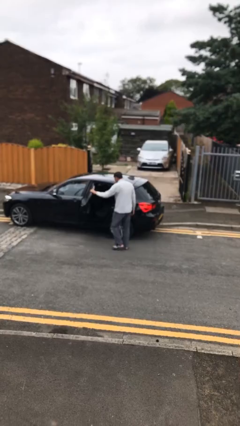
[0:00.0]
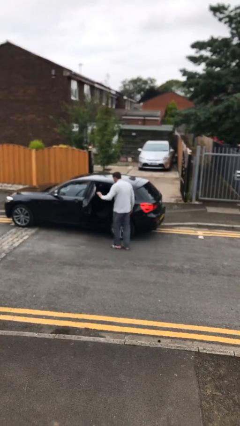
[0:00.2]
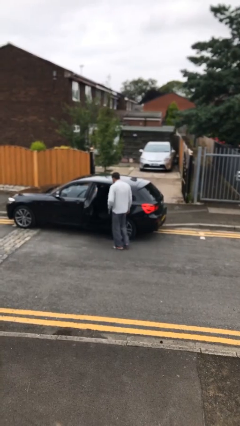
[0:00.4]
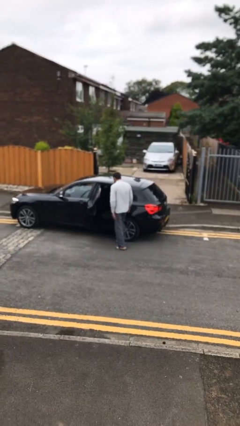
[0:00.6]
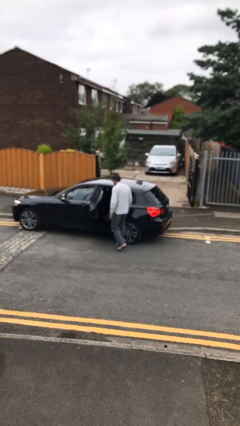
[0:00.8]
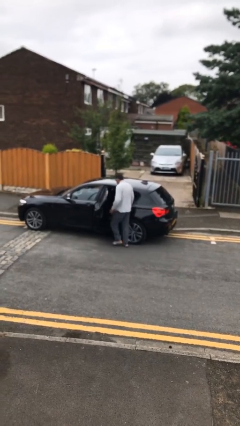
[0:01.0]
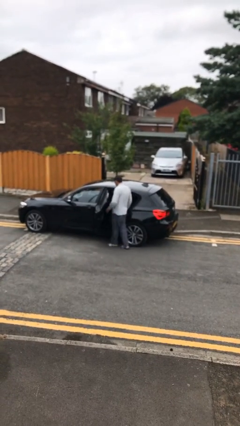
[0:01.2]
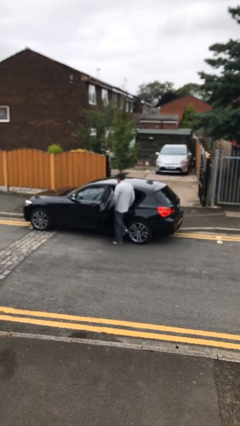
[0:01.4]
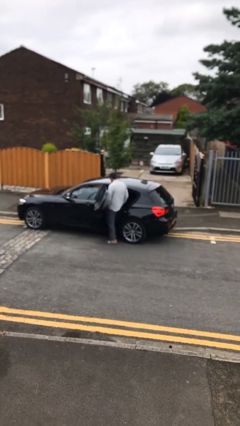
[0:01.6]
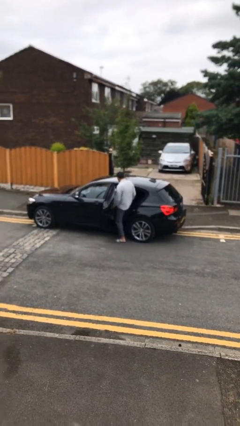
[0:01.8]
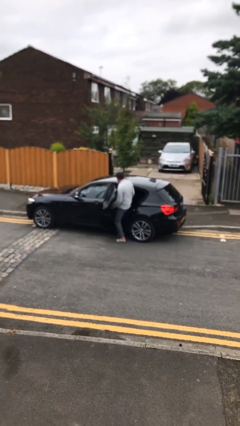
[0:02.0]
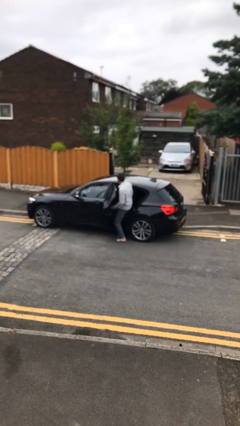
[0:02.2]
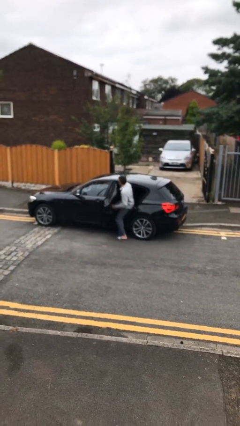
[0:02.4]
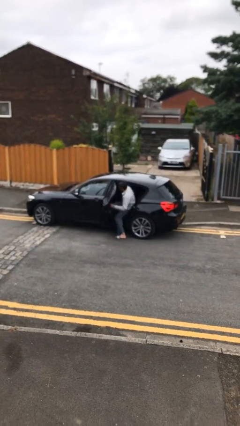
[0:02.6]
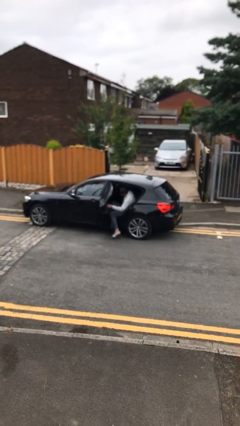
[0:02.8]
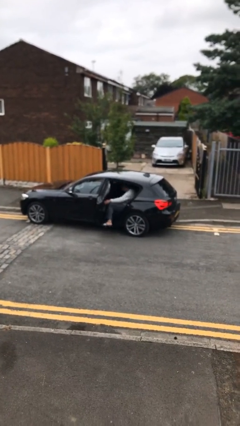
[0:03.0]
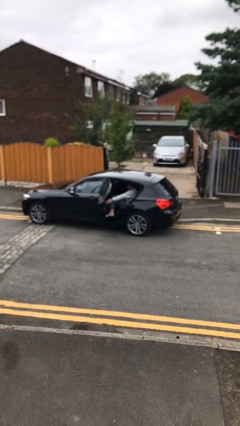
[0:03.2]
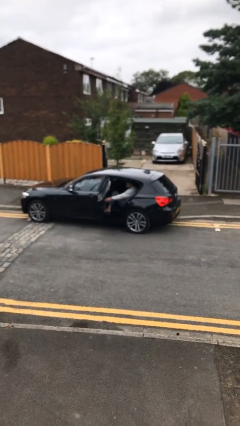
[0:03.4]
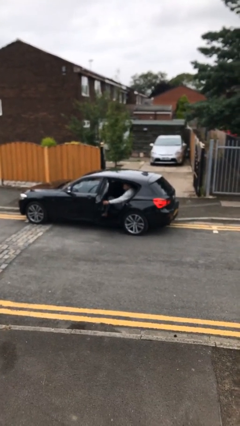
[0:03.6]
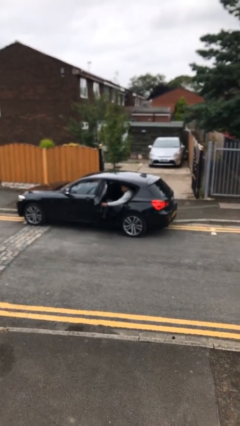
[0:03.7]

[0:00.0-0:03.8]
person enters car

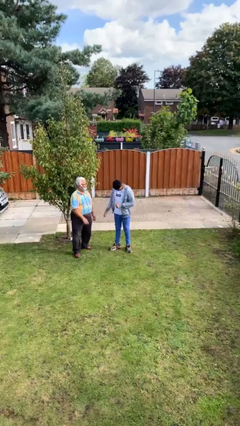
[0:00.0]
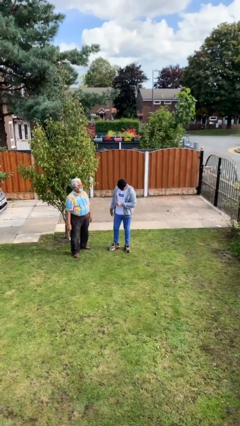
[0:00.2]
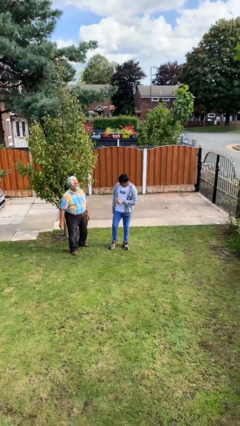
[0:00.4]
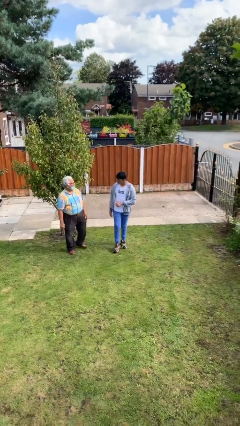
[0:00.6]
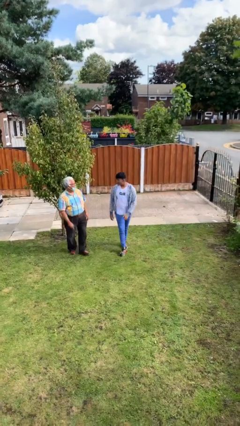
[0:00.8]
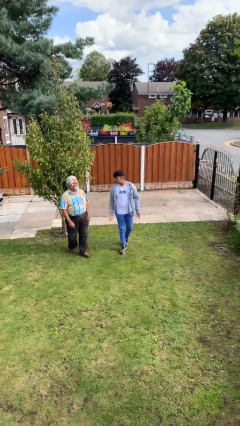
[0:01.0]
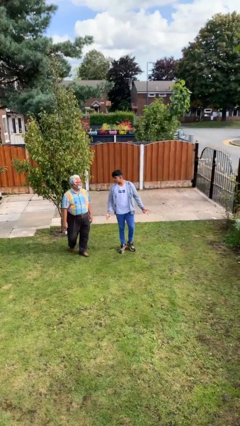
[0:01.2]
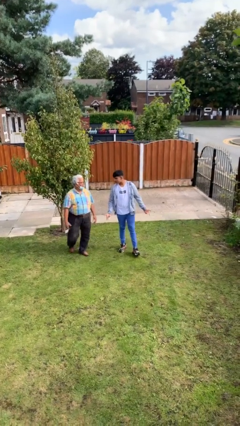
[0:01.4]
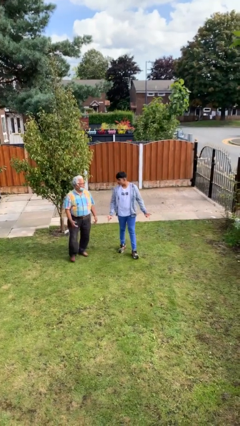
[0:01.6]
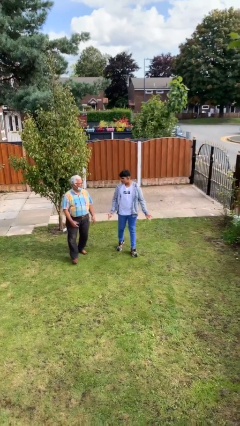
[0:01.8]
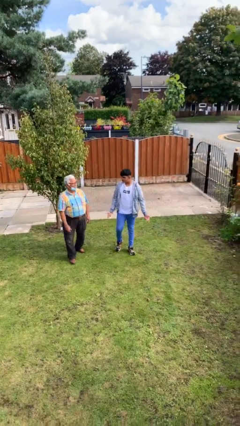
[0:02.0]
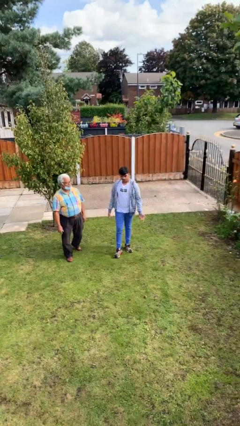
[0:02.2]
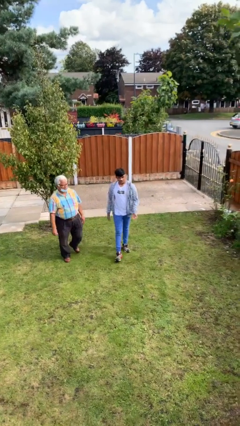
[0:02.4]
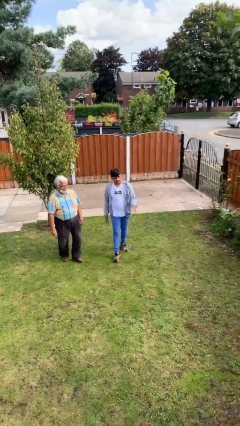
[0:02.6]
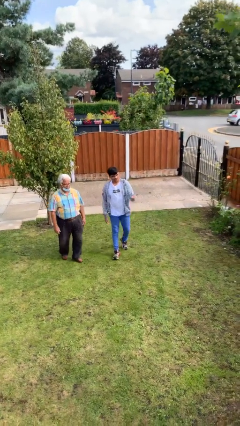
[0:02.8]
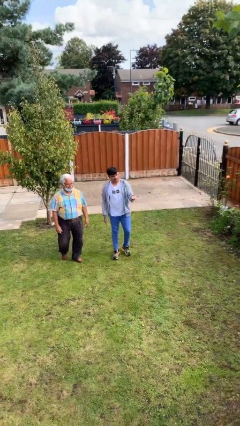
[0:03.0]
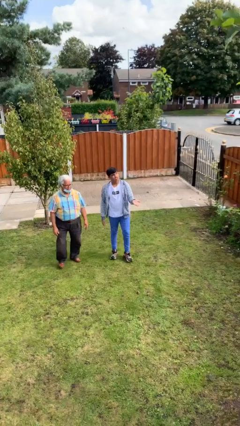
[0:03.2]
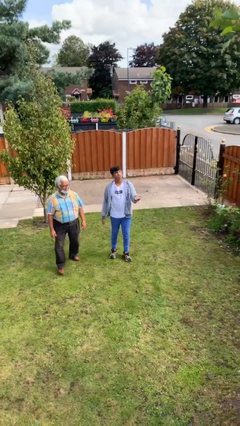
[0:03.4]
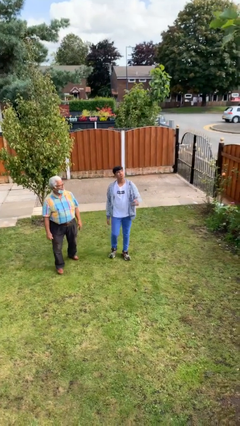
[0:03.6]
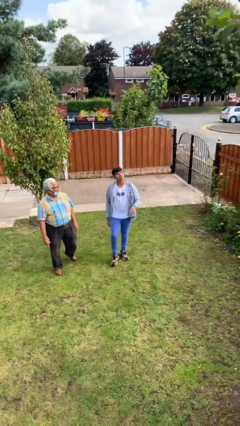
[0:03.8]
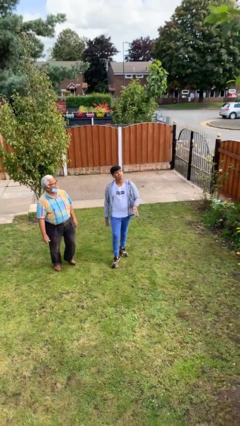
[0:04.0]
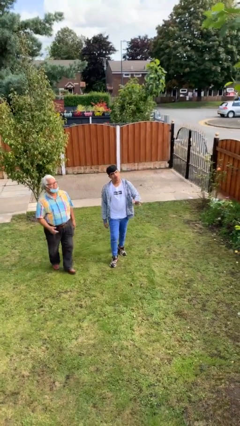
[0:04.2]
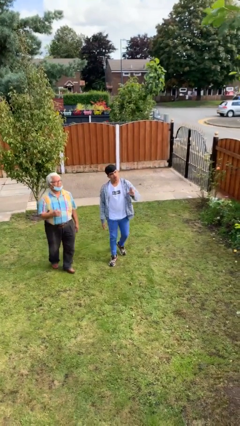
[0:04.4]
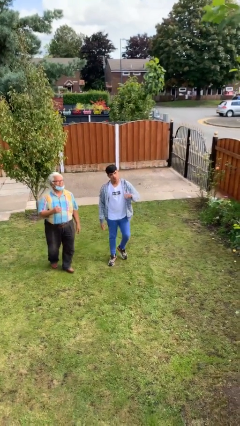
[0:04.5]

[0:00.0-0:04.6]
person talks to person

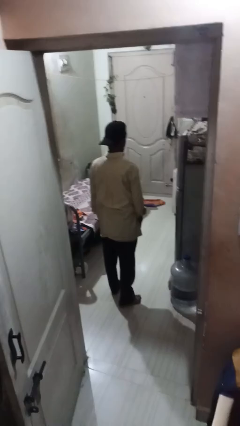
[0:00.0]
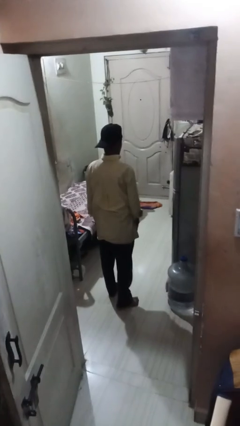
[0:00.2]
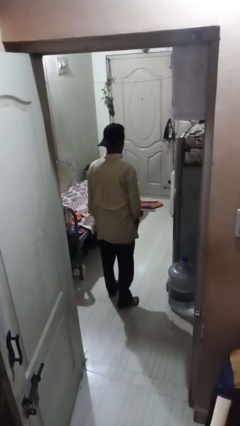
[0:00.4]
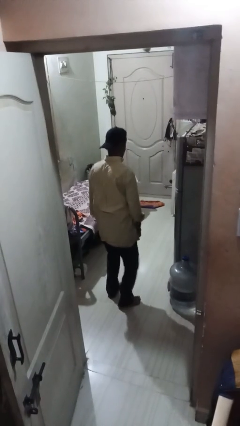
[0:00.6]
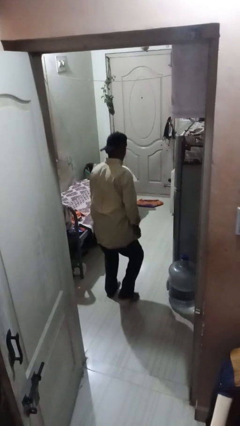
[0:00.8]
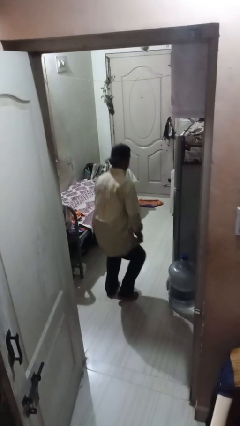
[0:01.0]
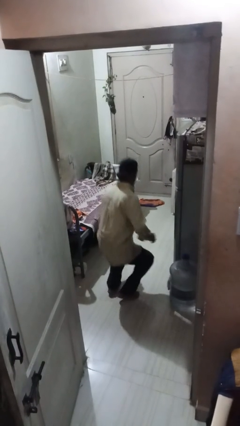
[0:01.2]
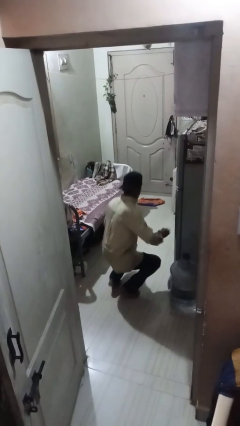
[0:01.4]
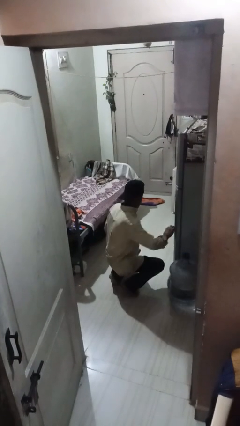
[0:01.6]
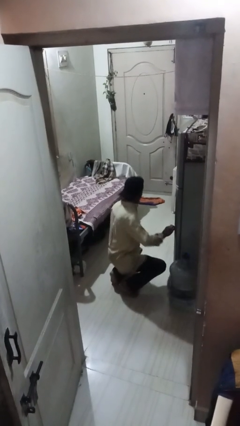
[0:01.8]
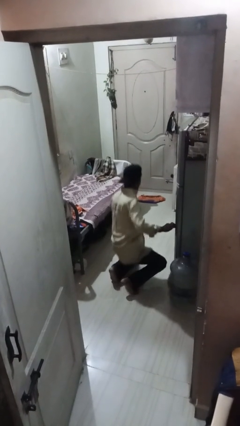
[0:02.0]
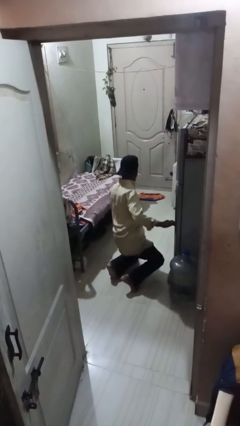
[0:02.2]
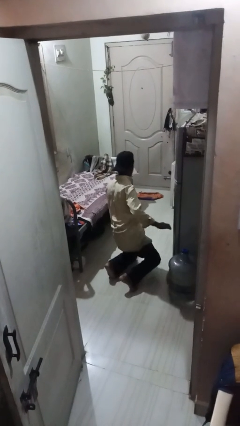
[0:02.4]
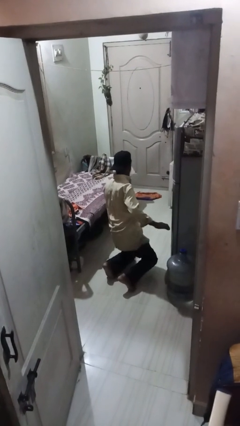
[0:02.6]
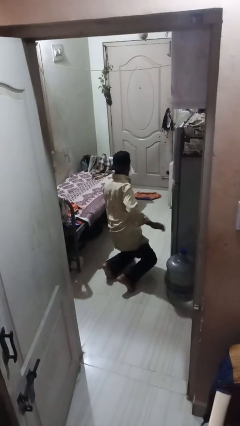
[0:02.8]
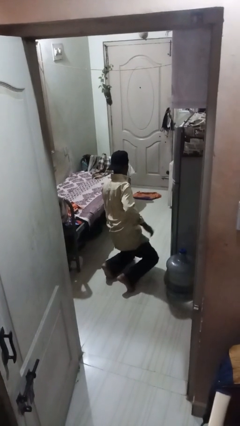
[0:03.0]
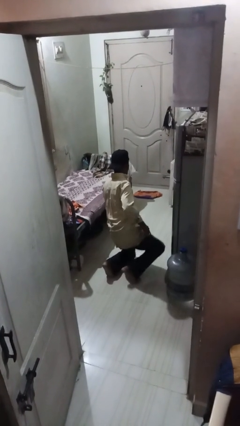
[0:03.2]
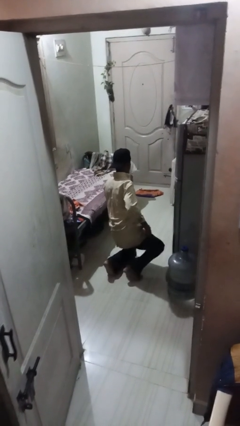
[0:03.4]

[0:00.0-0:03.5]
person kneels

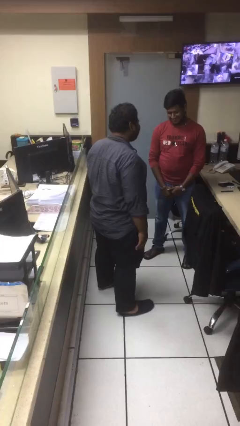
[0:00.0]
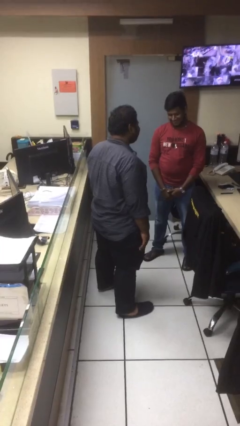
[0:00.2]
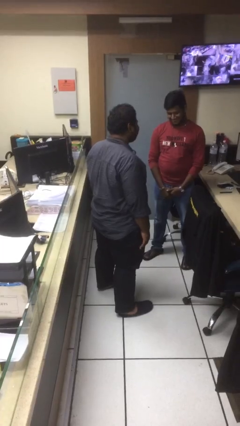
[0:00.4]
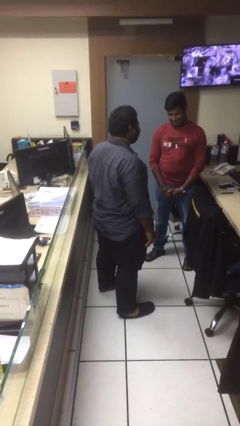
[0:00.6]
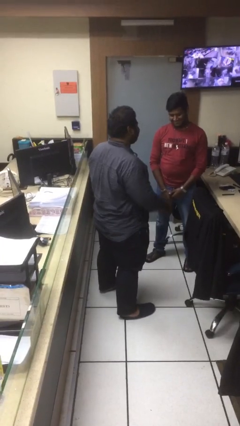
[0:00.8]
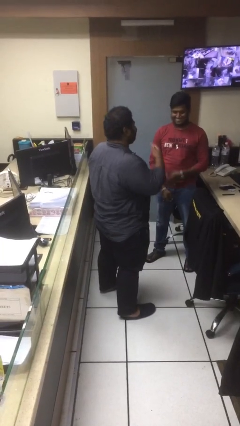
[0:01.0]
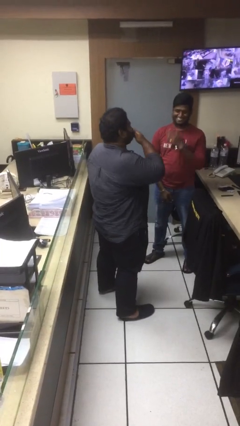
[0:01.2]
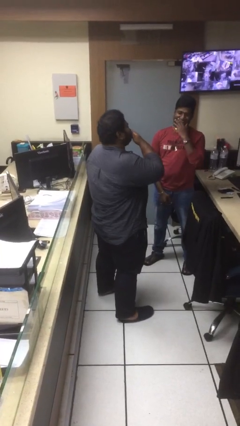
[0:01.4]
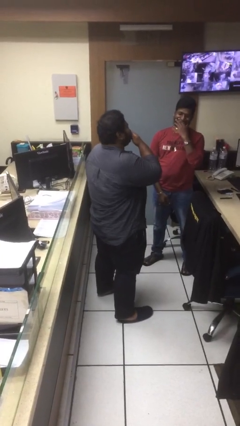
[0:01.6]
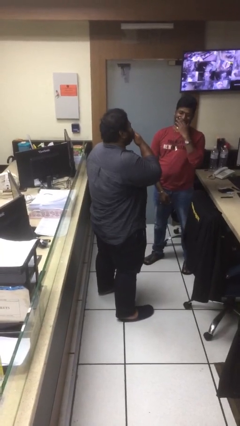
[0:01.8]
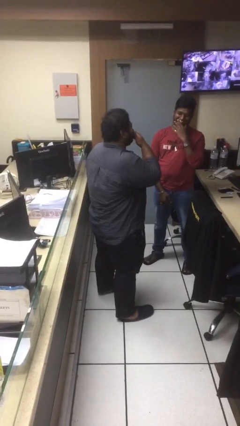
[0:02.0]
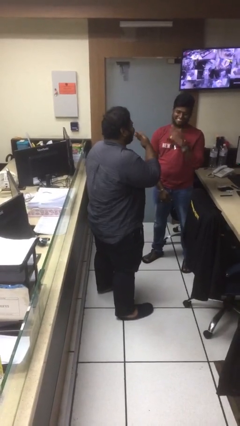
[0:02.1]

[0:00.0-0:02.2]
person laughs with person

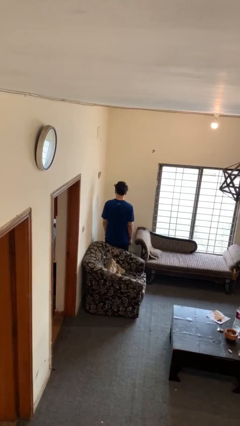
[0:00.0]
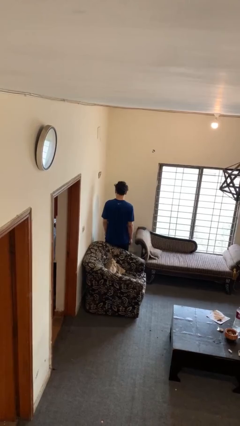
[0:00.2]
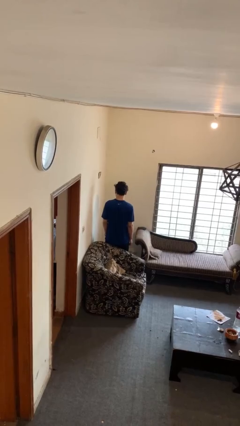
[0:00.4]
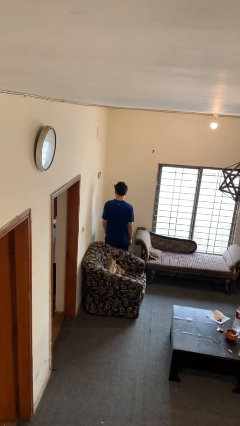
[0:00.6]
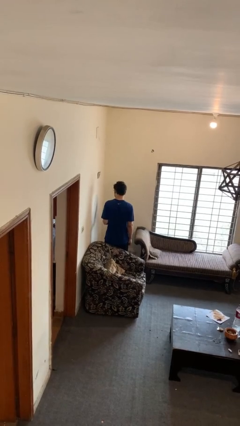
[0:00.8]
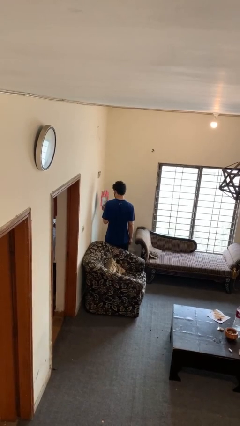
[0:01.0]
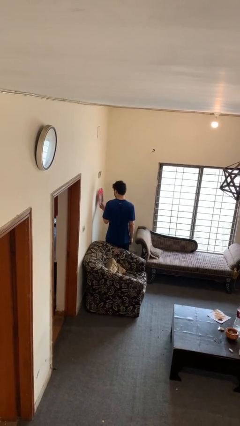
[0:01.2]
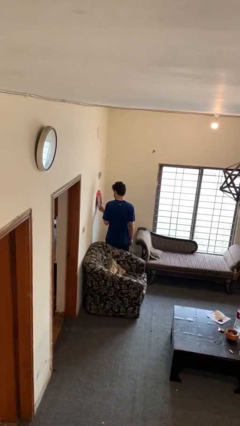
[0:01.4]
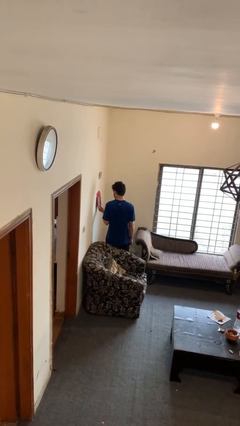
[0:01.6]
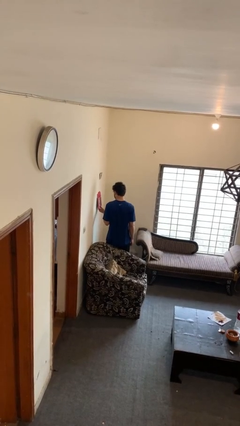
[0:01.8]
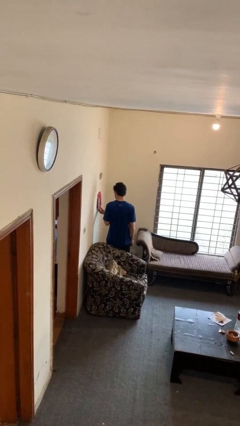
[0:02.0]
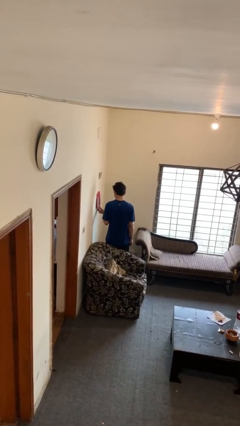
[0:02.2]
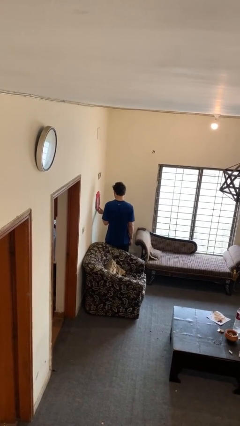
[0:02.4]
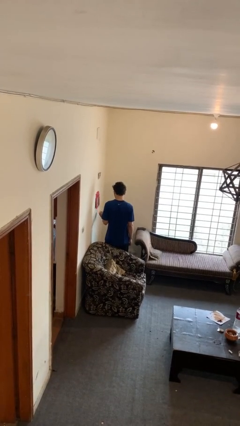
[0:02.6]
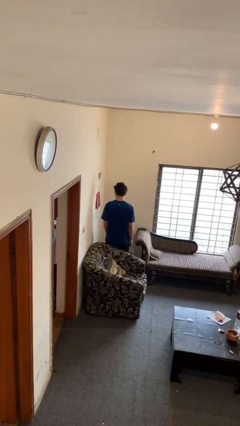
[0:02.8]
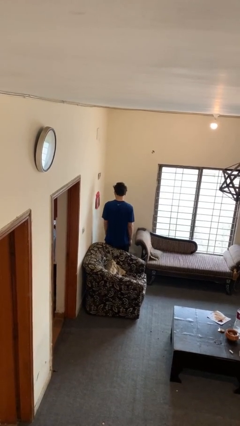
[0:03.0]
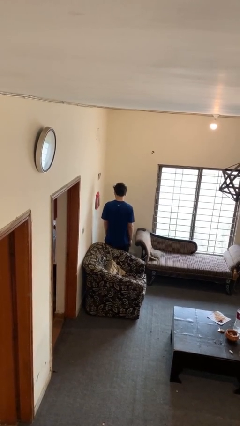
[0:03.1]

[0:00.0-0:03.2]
person puts up picture frame

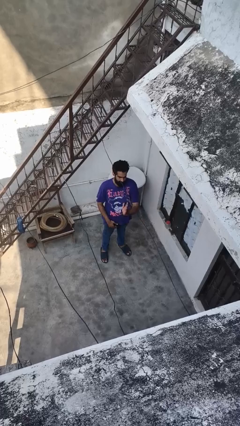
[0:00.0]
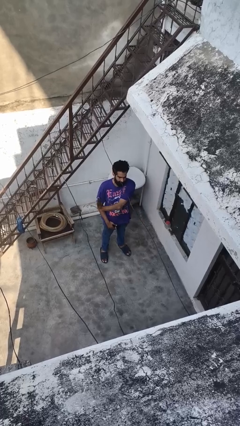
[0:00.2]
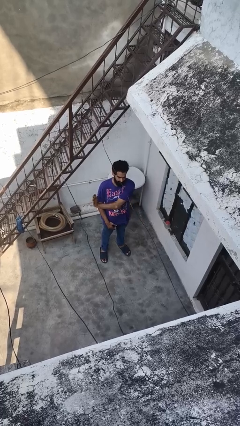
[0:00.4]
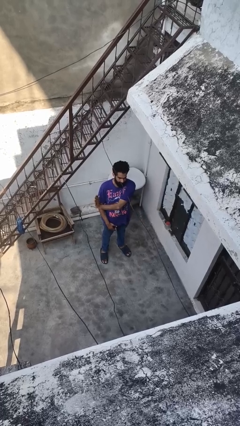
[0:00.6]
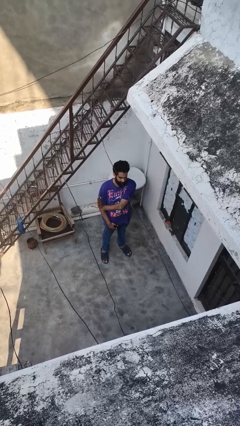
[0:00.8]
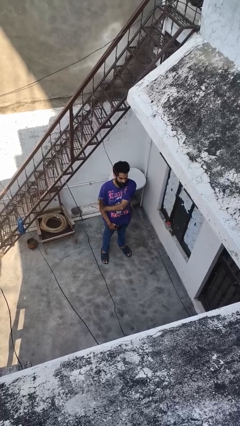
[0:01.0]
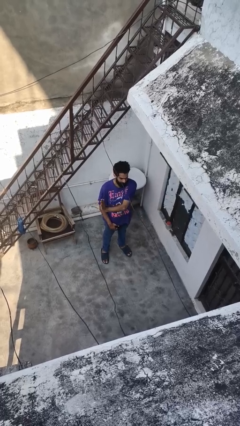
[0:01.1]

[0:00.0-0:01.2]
person gestures swipe right
